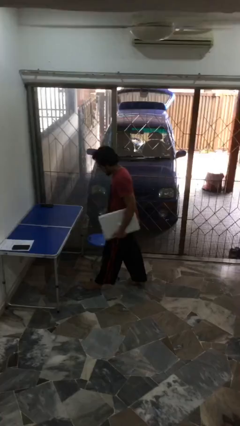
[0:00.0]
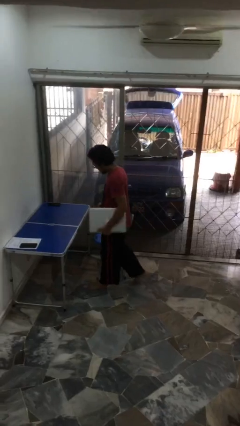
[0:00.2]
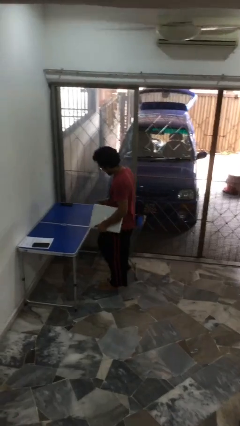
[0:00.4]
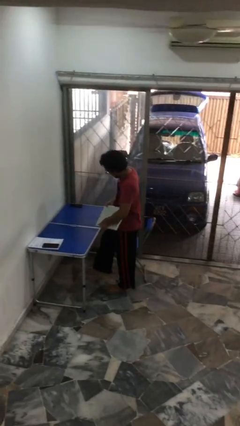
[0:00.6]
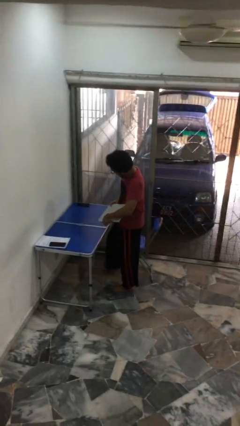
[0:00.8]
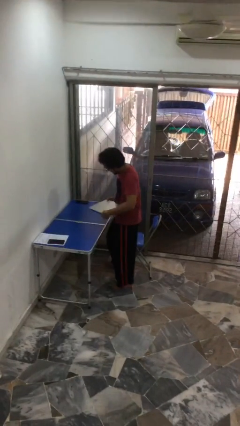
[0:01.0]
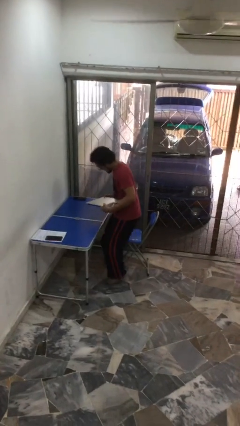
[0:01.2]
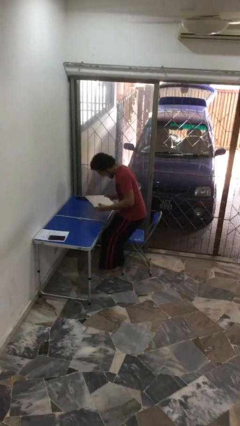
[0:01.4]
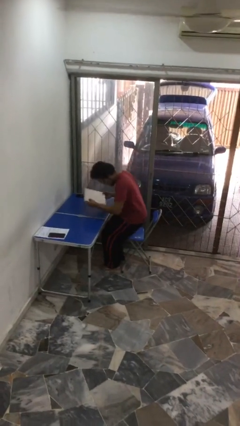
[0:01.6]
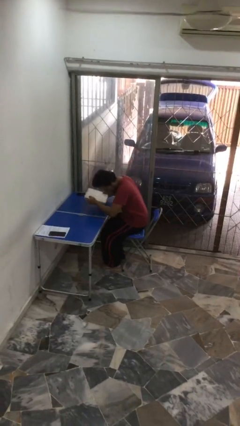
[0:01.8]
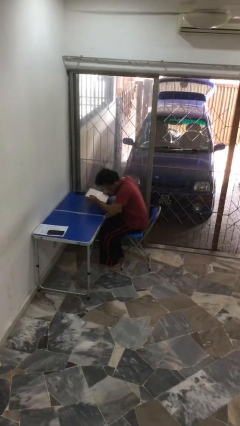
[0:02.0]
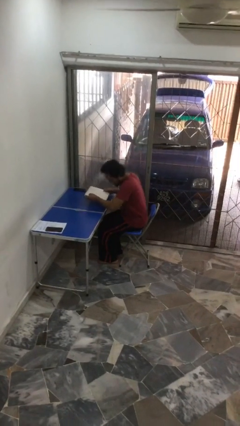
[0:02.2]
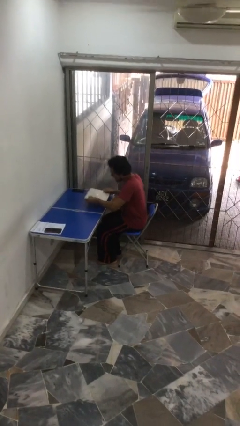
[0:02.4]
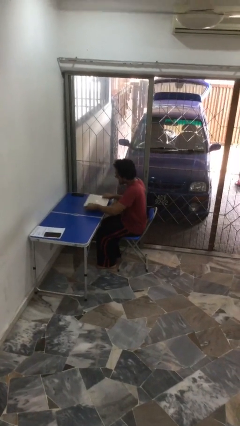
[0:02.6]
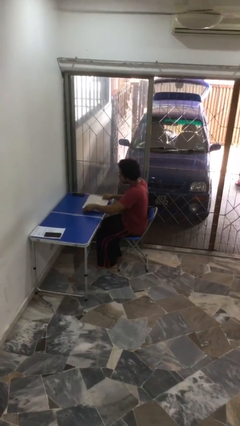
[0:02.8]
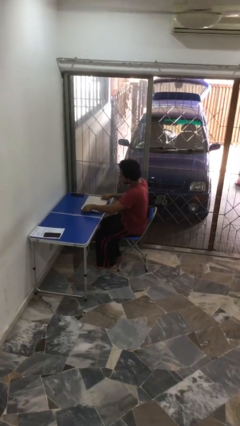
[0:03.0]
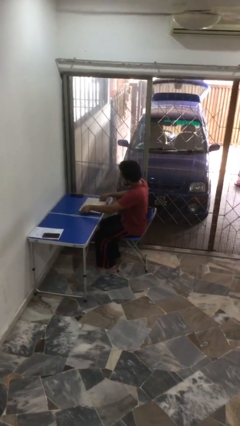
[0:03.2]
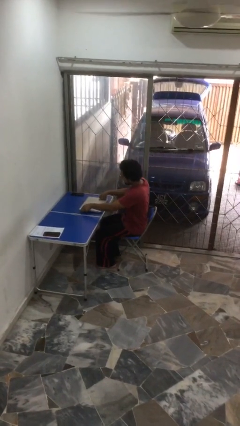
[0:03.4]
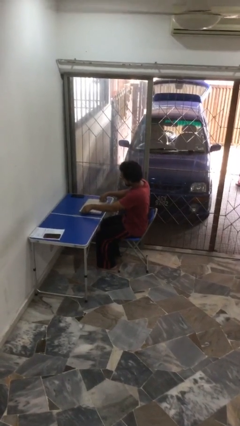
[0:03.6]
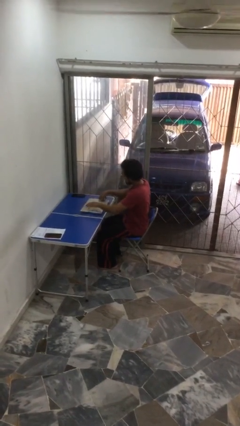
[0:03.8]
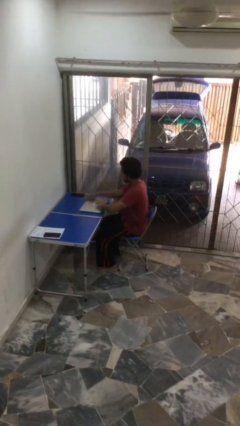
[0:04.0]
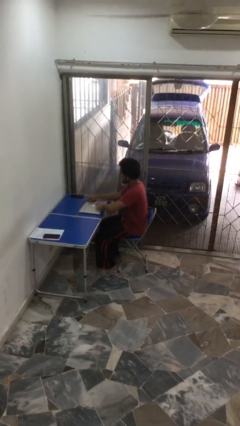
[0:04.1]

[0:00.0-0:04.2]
person sits down

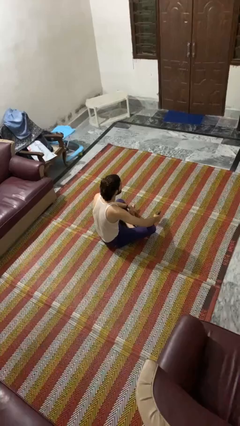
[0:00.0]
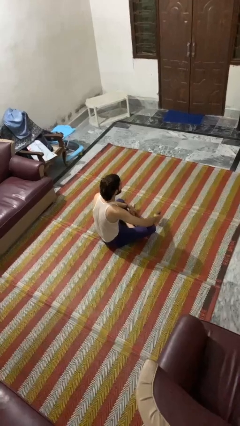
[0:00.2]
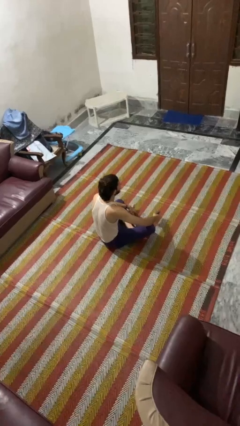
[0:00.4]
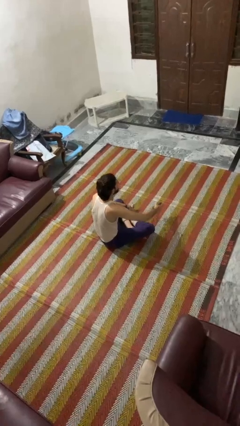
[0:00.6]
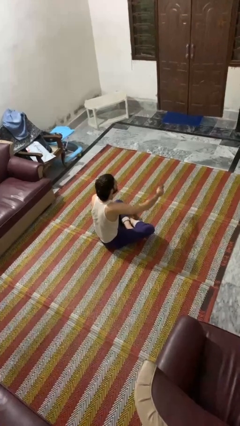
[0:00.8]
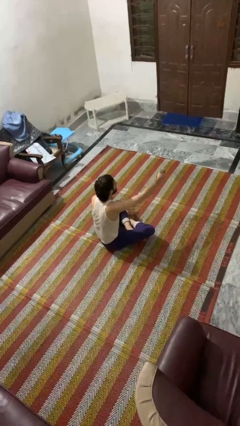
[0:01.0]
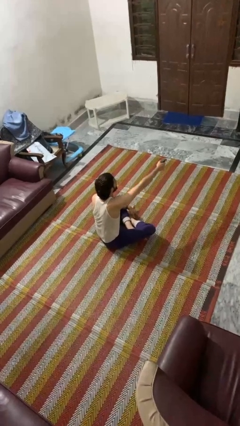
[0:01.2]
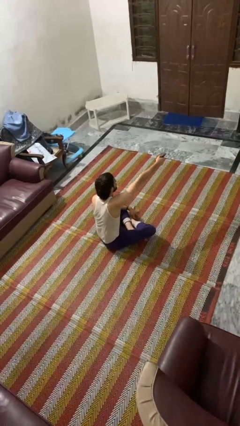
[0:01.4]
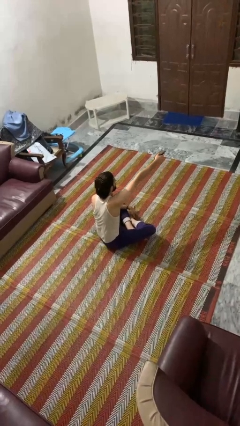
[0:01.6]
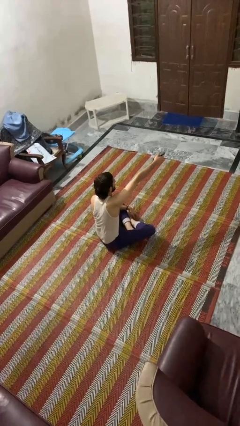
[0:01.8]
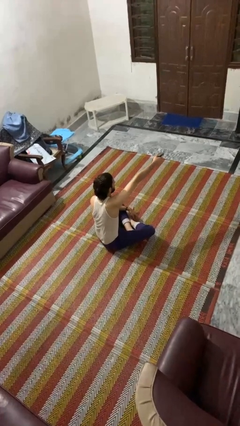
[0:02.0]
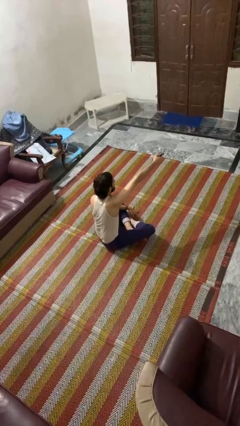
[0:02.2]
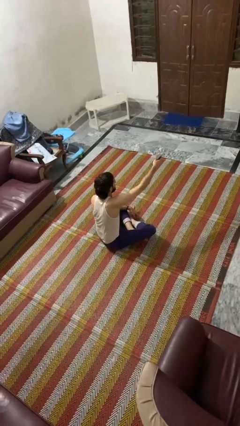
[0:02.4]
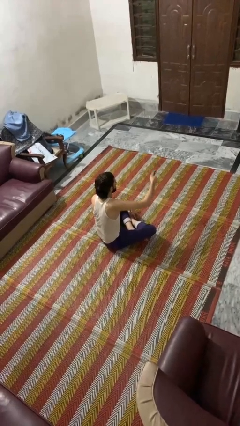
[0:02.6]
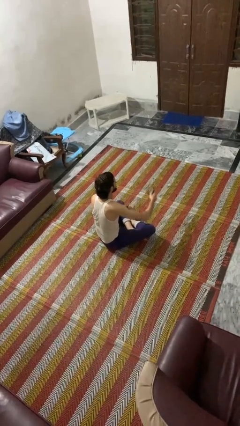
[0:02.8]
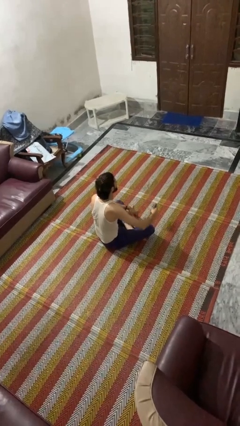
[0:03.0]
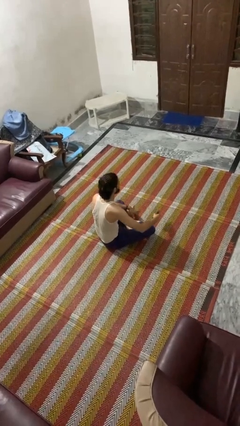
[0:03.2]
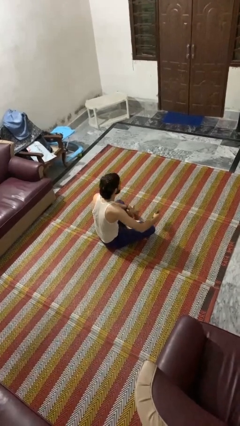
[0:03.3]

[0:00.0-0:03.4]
person uses television remote

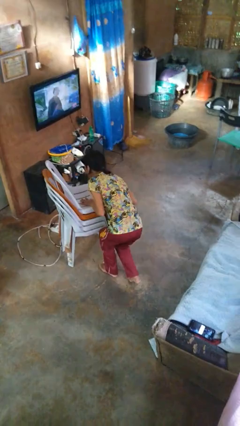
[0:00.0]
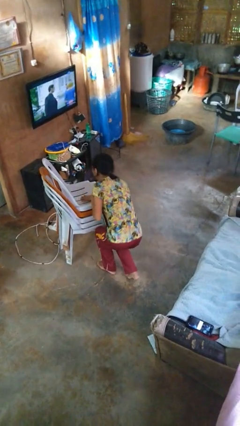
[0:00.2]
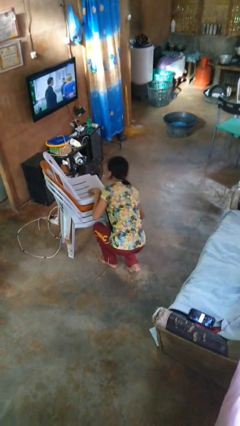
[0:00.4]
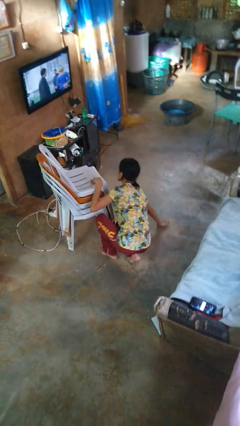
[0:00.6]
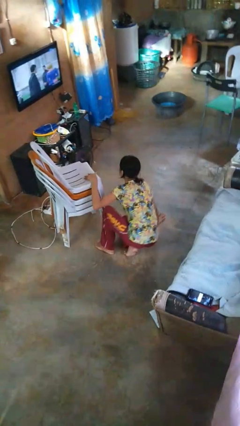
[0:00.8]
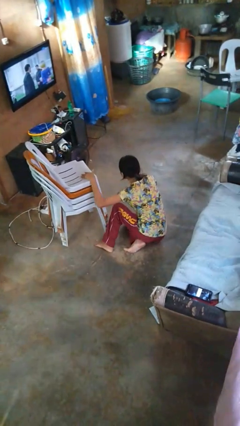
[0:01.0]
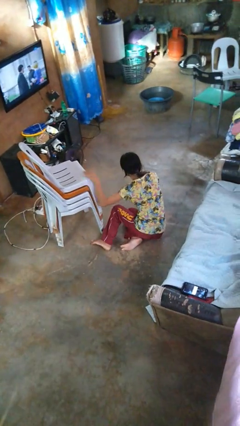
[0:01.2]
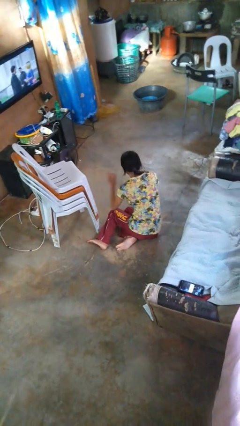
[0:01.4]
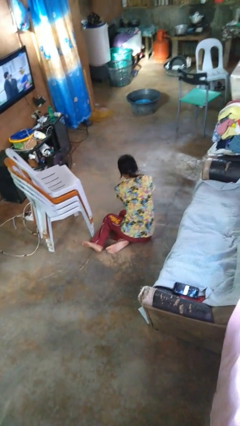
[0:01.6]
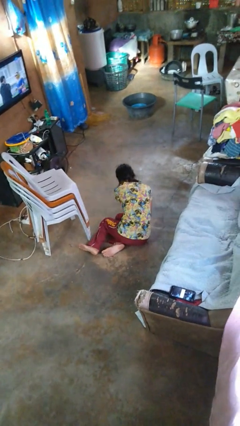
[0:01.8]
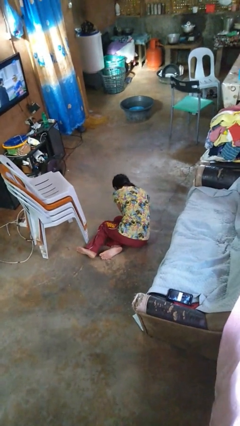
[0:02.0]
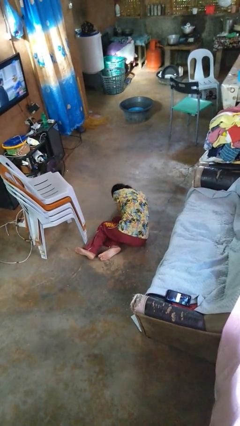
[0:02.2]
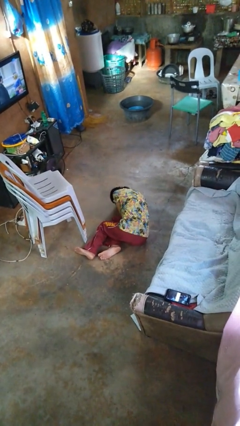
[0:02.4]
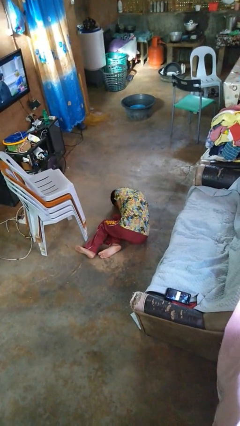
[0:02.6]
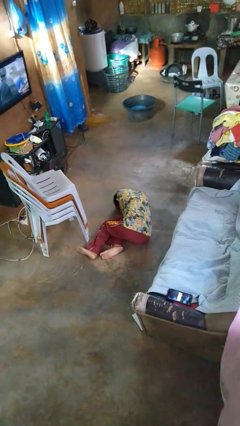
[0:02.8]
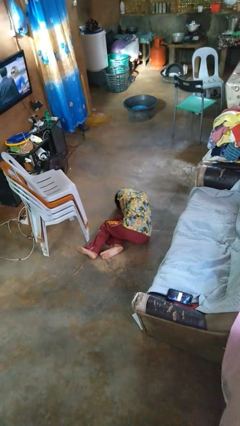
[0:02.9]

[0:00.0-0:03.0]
person lies down on floor

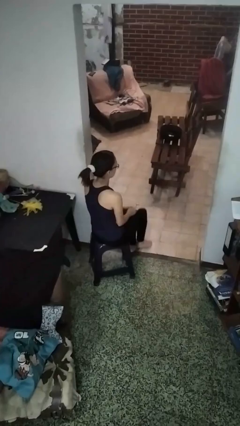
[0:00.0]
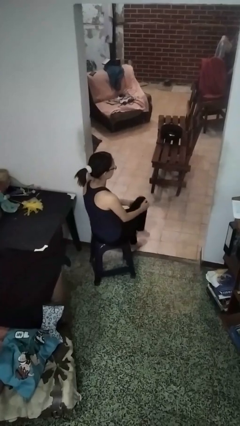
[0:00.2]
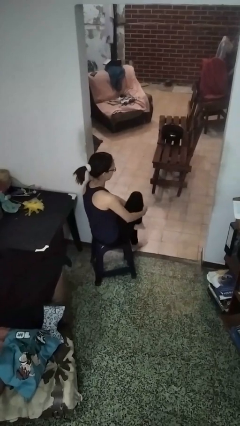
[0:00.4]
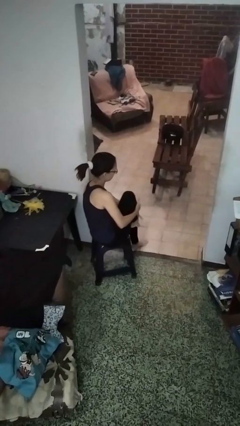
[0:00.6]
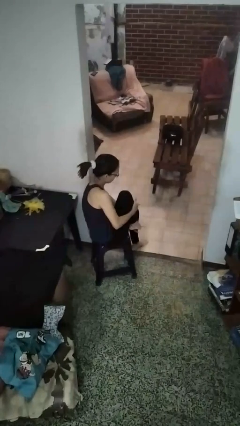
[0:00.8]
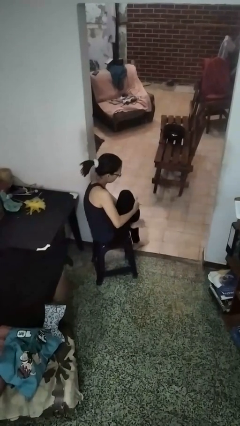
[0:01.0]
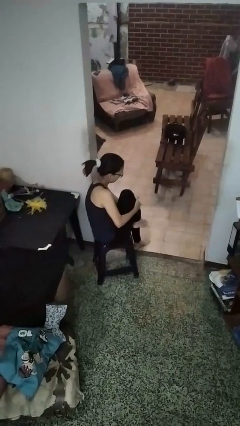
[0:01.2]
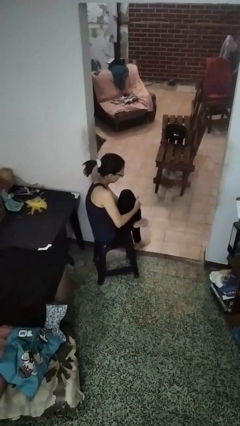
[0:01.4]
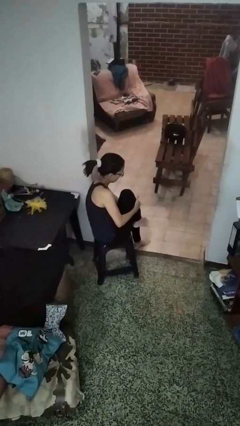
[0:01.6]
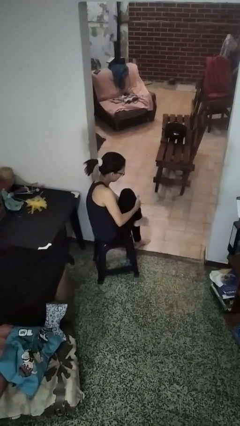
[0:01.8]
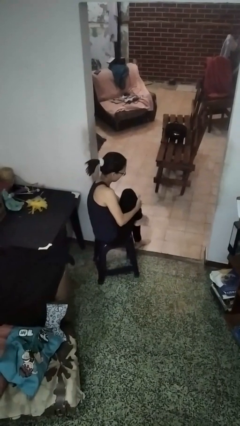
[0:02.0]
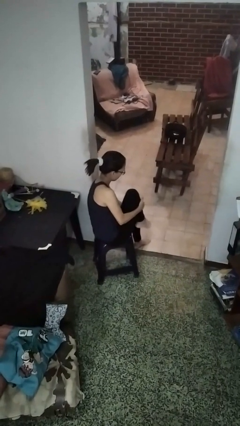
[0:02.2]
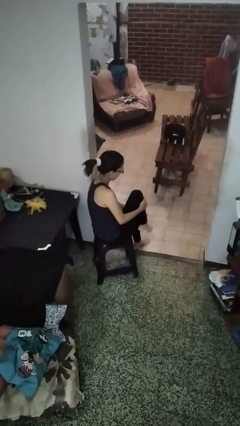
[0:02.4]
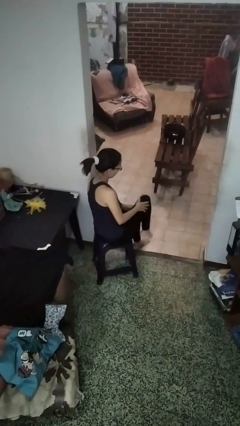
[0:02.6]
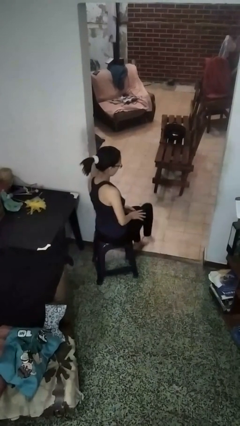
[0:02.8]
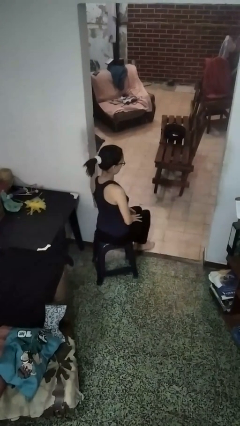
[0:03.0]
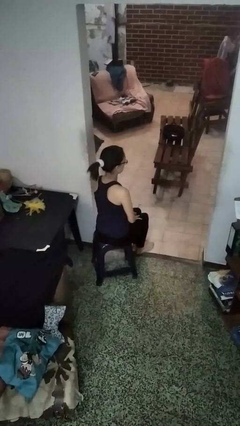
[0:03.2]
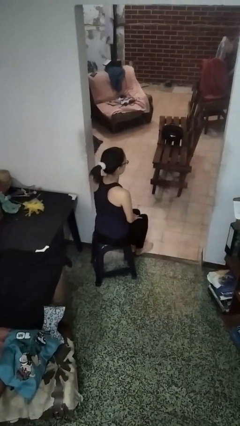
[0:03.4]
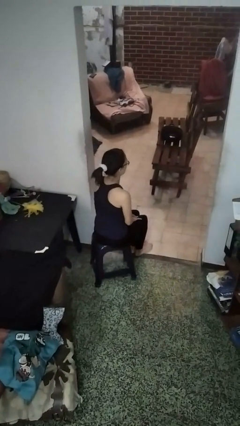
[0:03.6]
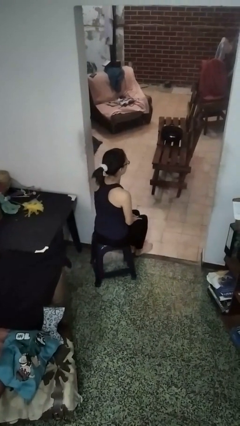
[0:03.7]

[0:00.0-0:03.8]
person rubs foot

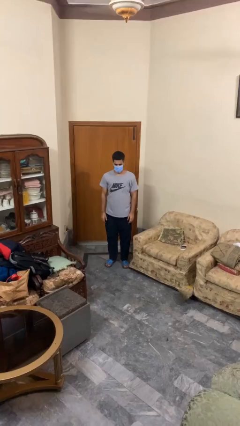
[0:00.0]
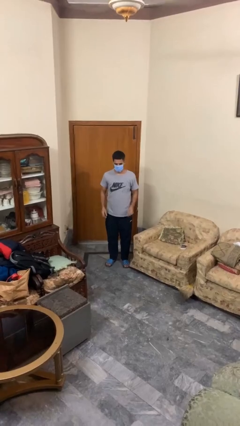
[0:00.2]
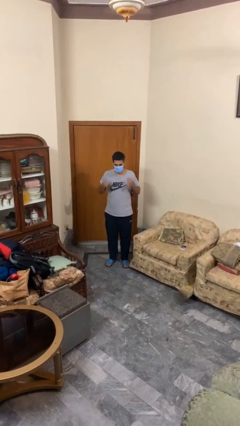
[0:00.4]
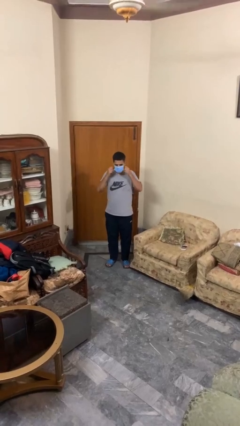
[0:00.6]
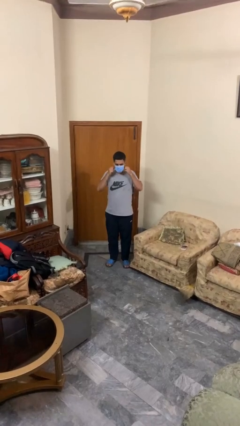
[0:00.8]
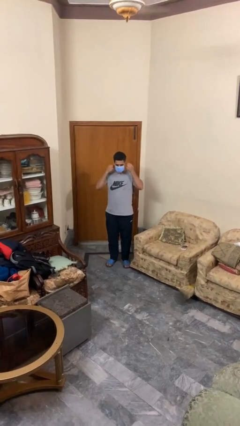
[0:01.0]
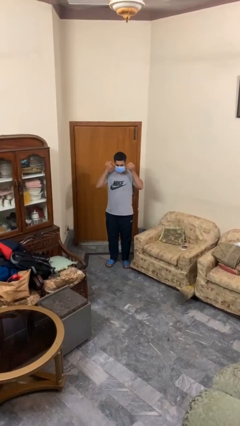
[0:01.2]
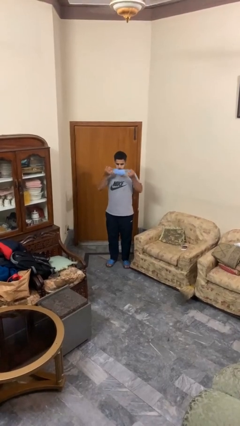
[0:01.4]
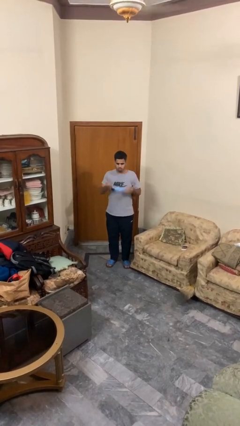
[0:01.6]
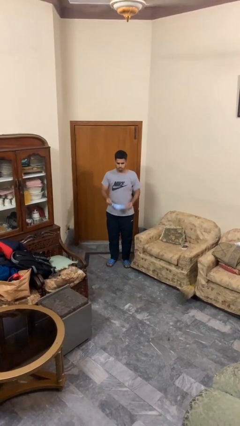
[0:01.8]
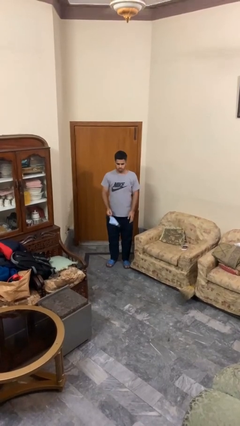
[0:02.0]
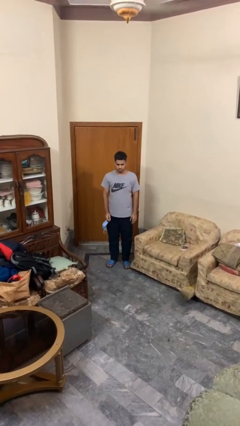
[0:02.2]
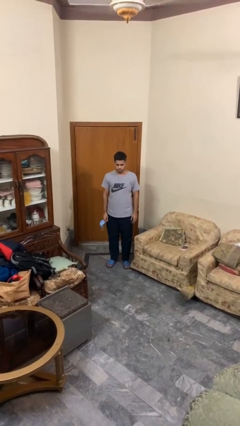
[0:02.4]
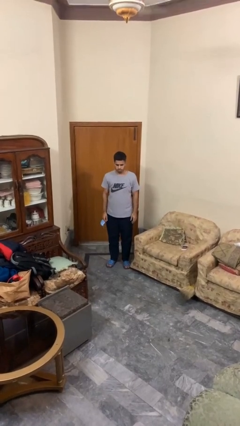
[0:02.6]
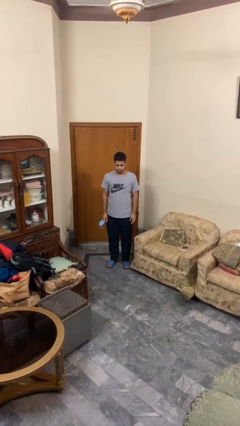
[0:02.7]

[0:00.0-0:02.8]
person takes off facemask

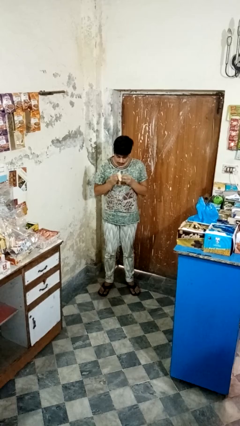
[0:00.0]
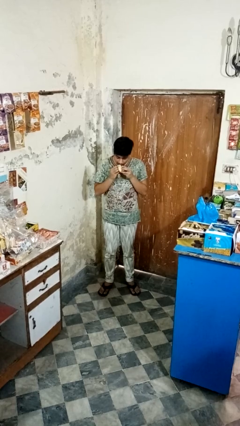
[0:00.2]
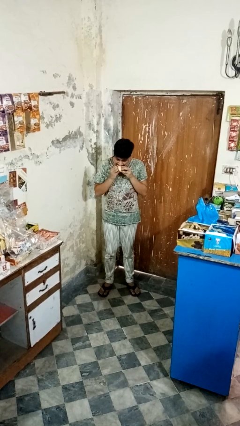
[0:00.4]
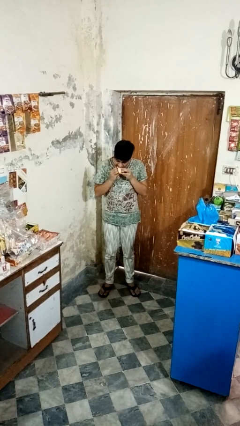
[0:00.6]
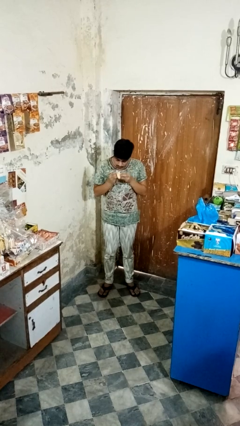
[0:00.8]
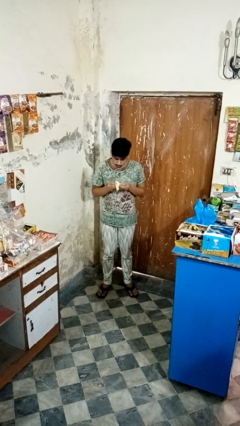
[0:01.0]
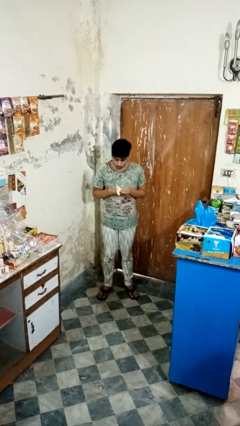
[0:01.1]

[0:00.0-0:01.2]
person eats banana
